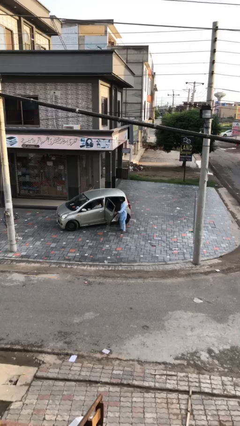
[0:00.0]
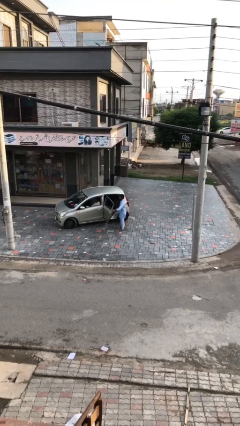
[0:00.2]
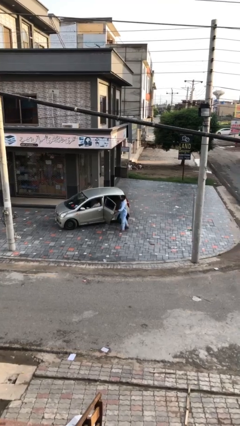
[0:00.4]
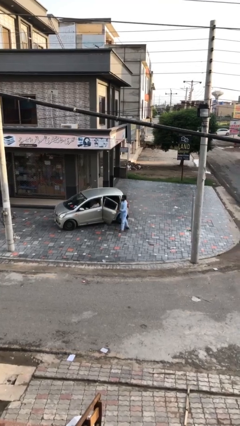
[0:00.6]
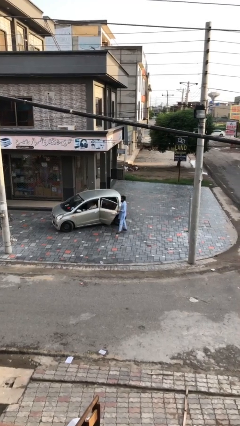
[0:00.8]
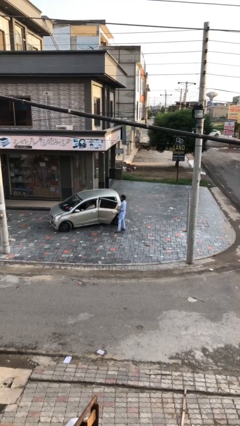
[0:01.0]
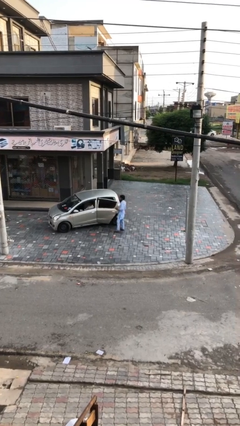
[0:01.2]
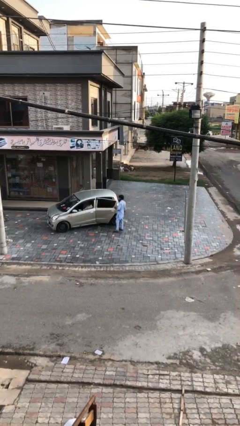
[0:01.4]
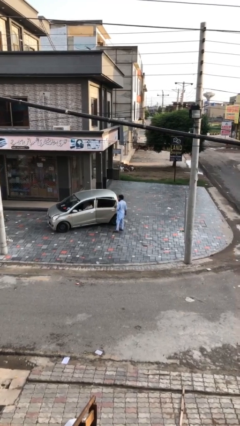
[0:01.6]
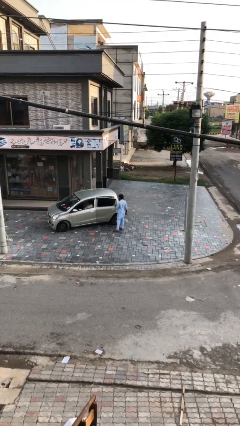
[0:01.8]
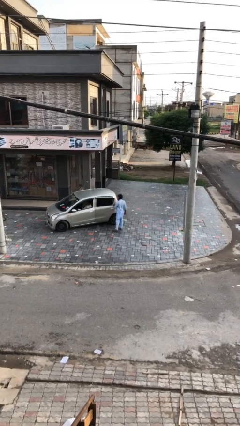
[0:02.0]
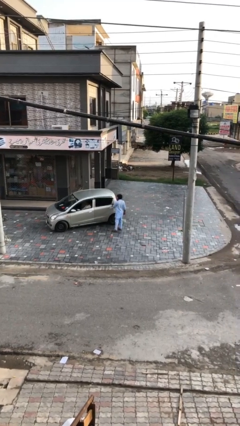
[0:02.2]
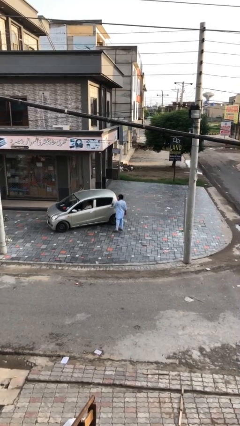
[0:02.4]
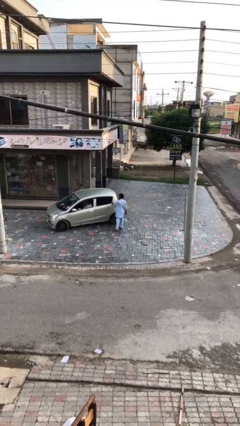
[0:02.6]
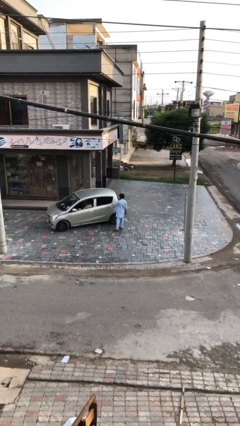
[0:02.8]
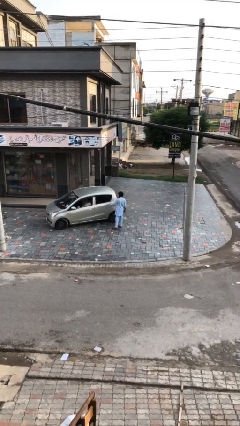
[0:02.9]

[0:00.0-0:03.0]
person closes car door

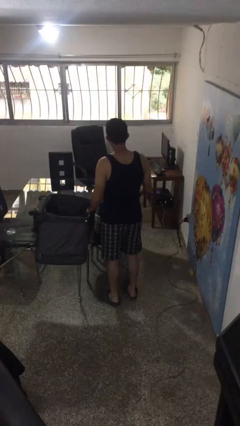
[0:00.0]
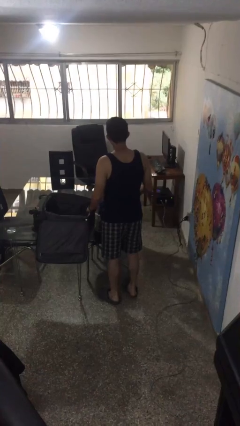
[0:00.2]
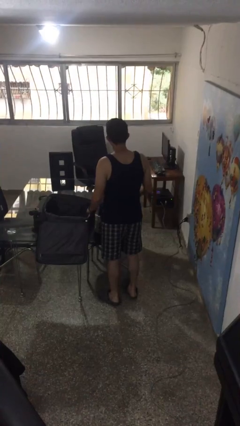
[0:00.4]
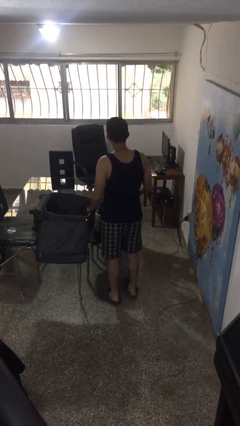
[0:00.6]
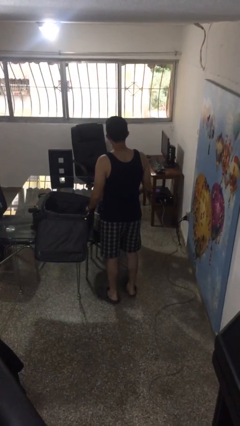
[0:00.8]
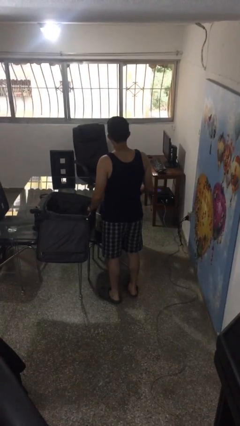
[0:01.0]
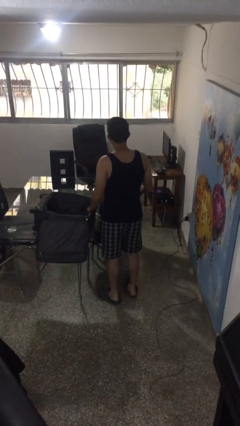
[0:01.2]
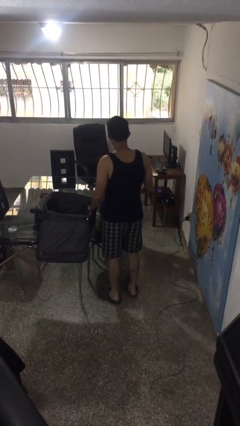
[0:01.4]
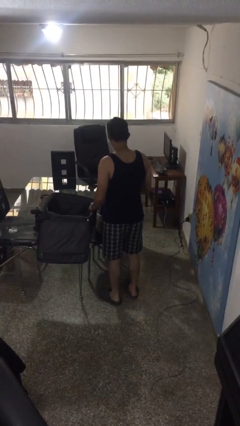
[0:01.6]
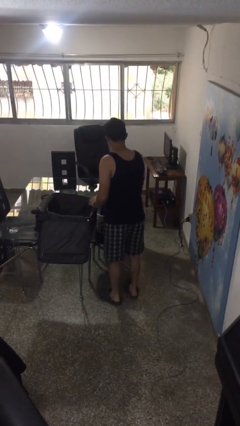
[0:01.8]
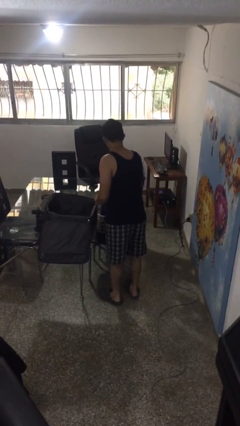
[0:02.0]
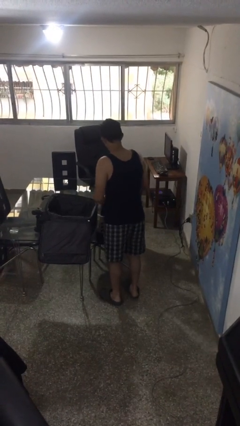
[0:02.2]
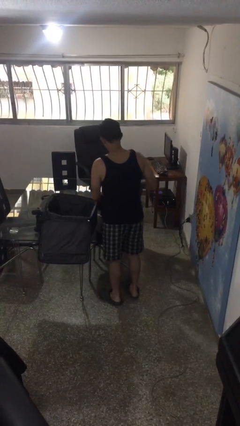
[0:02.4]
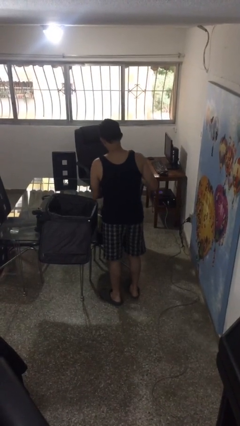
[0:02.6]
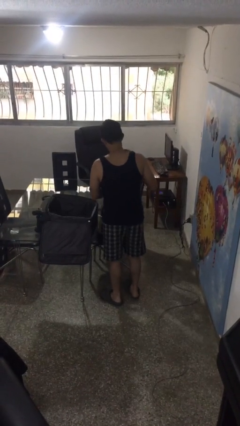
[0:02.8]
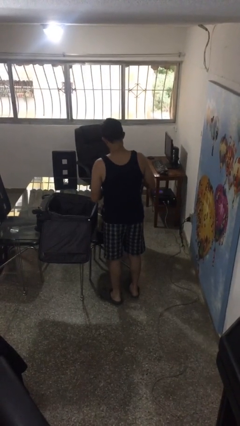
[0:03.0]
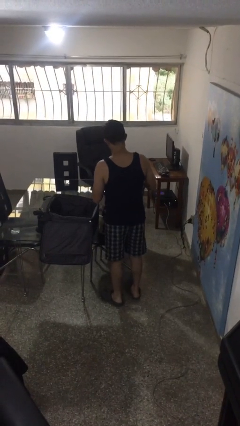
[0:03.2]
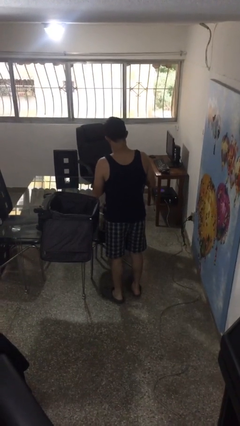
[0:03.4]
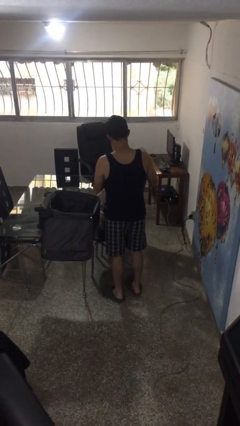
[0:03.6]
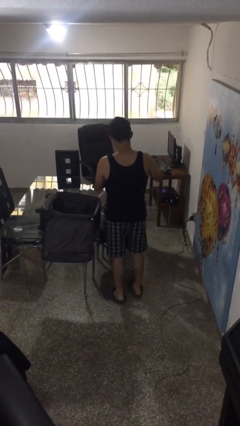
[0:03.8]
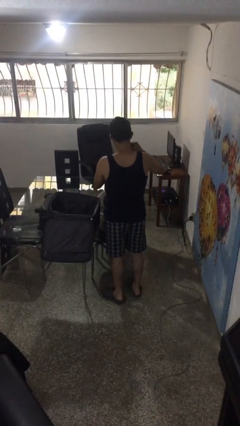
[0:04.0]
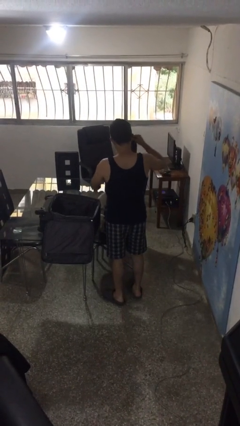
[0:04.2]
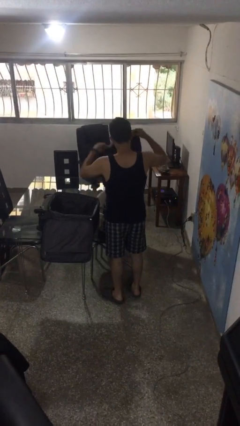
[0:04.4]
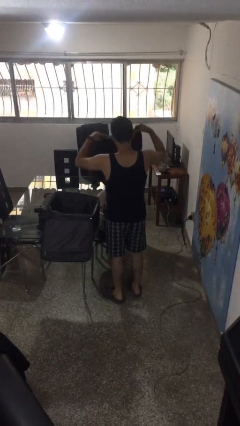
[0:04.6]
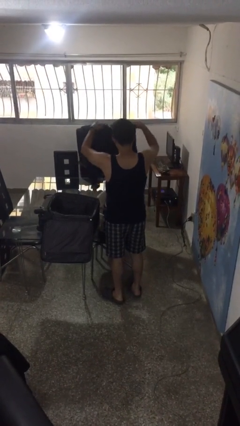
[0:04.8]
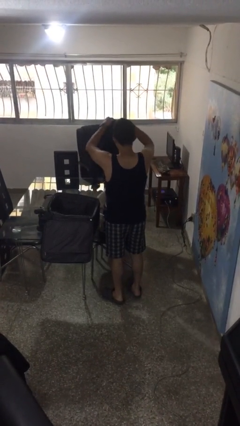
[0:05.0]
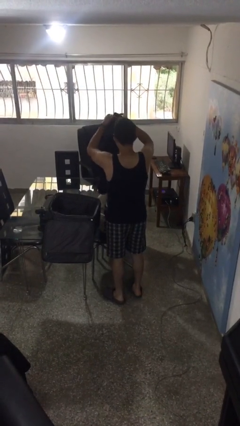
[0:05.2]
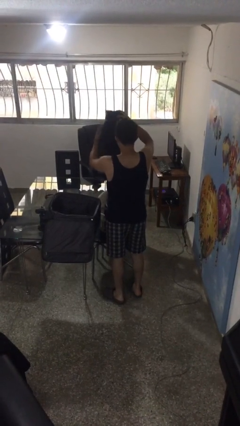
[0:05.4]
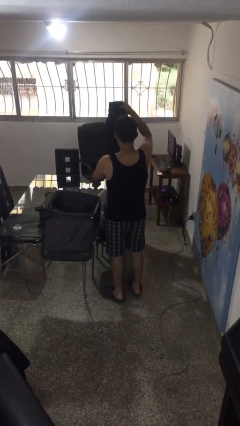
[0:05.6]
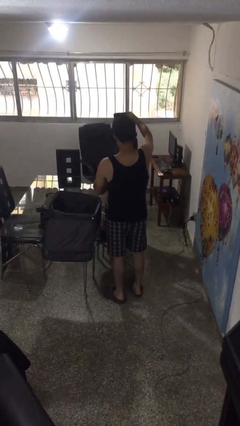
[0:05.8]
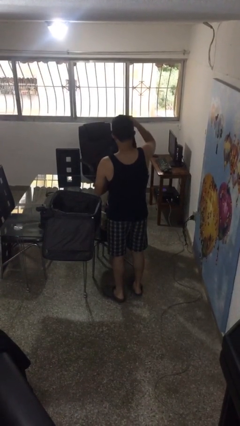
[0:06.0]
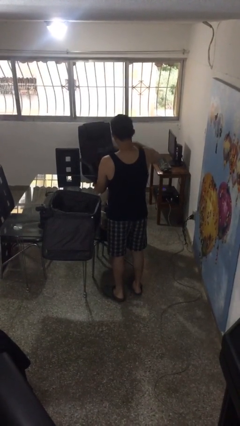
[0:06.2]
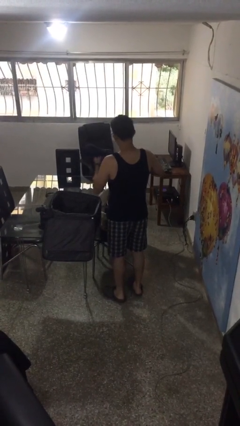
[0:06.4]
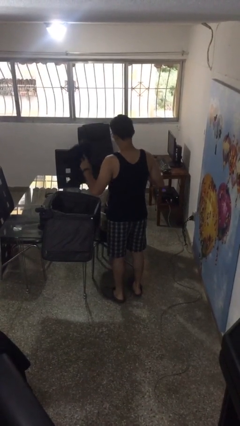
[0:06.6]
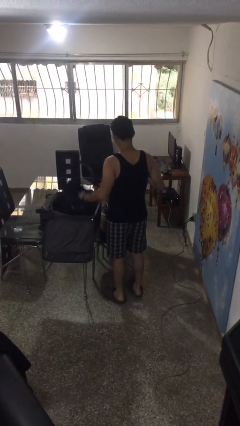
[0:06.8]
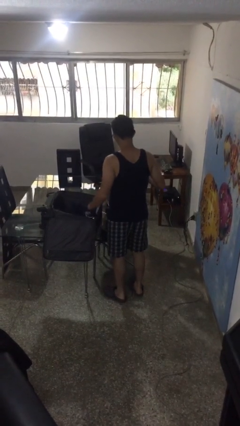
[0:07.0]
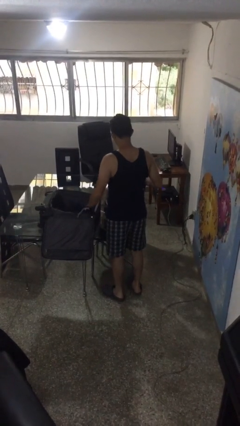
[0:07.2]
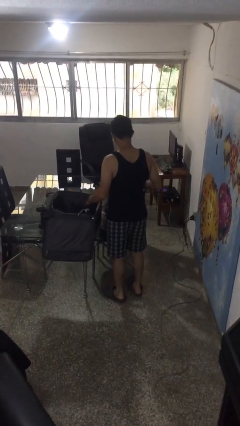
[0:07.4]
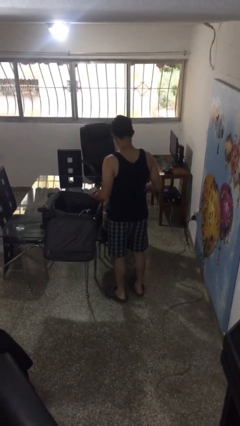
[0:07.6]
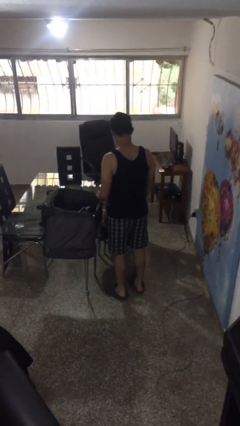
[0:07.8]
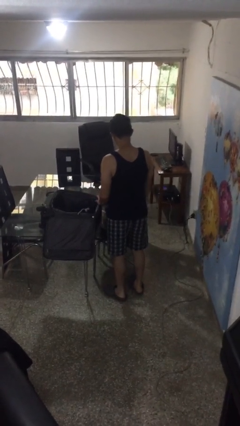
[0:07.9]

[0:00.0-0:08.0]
person loads clothes into suitcase

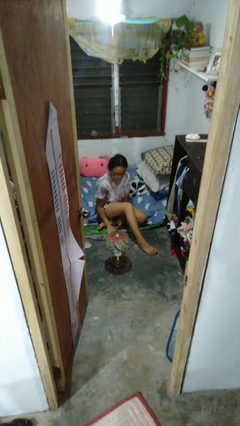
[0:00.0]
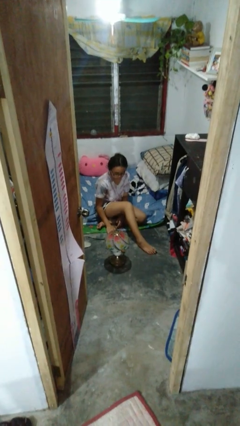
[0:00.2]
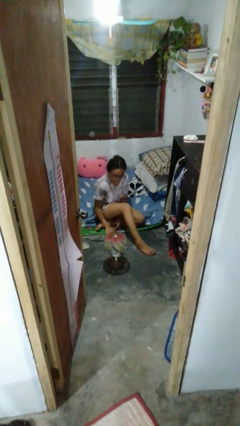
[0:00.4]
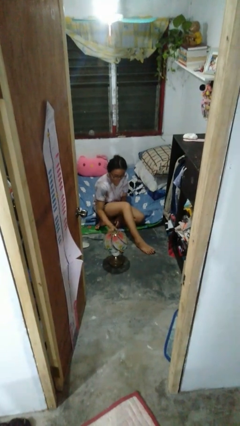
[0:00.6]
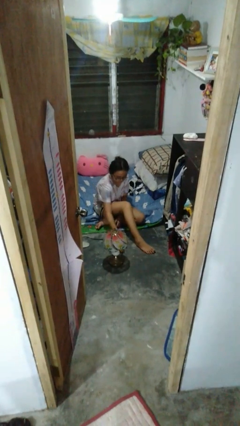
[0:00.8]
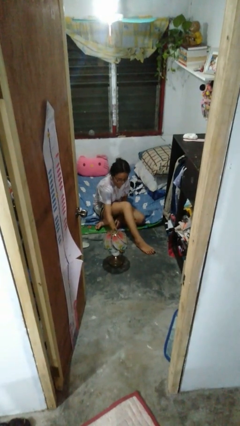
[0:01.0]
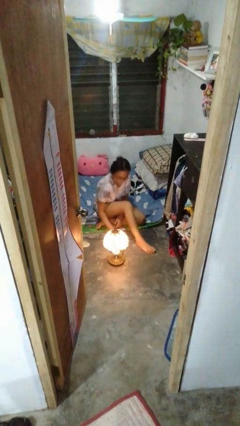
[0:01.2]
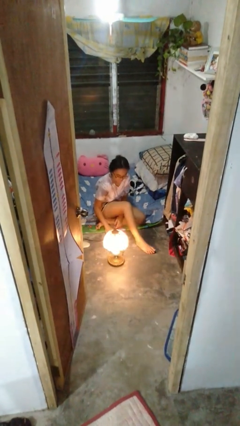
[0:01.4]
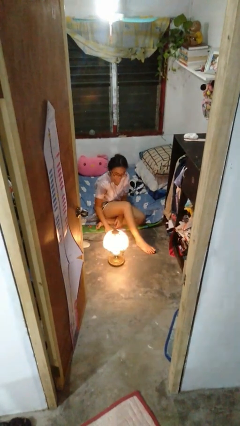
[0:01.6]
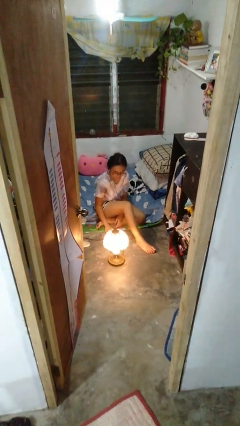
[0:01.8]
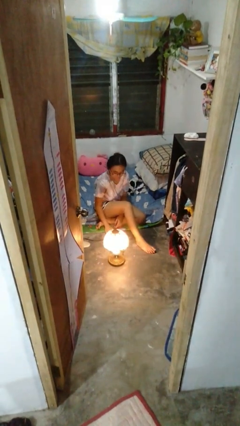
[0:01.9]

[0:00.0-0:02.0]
person turns on lamp

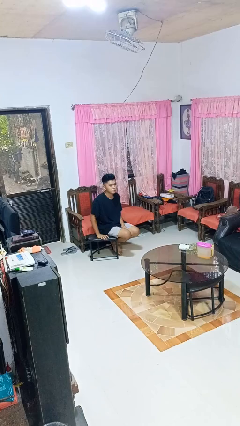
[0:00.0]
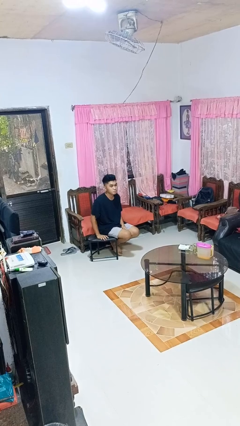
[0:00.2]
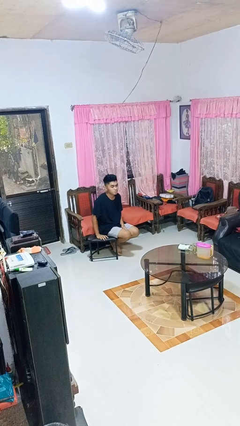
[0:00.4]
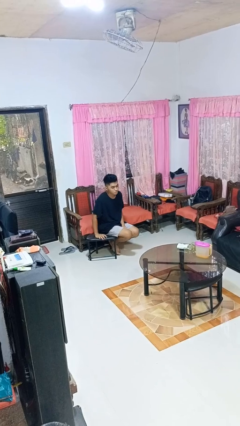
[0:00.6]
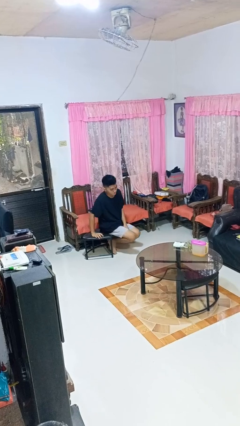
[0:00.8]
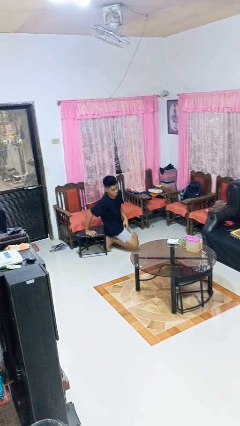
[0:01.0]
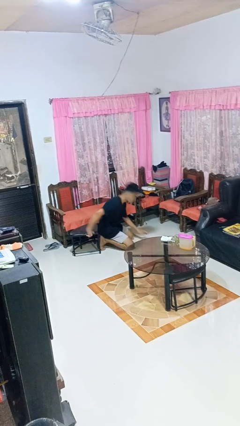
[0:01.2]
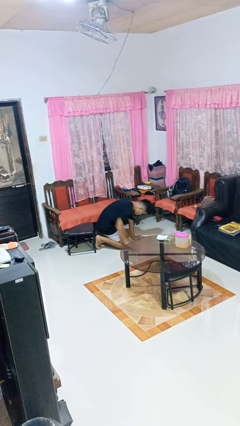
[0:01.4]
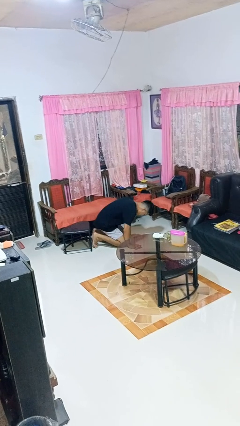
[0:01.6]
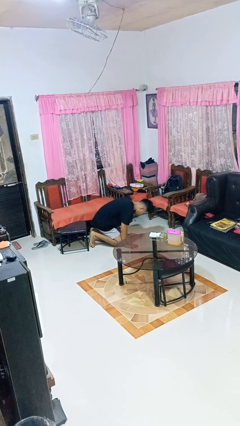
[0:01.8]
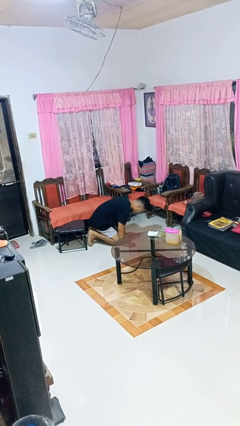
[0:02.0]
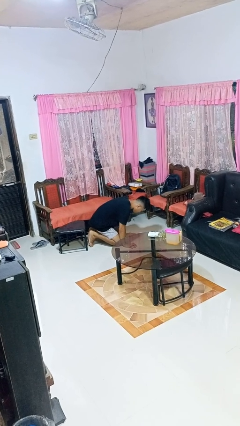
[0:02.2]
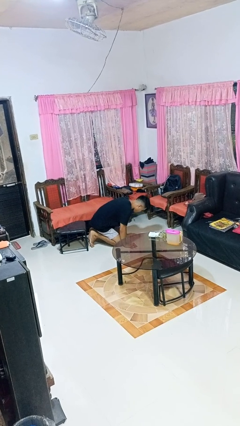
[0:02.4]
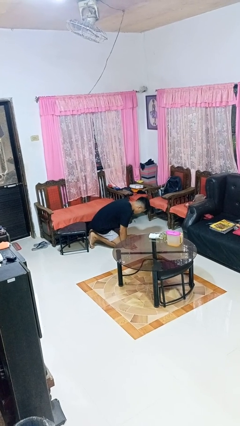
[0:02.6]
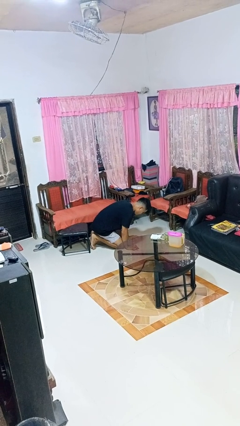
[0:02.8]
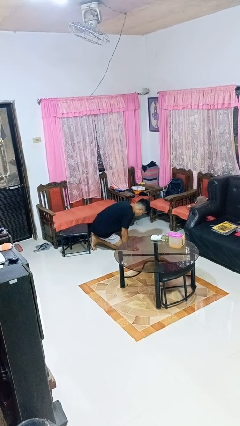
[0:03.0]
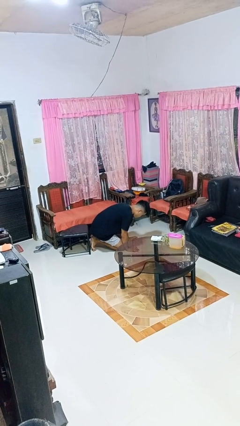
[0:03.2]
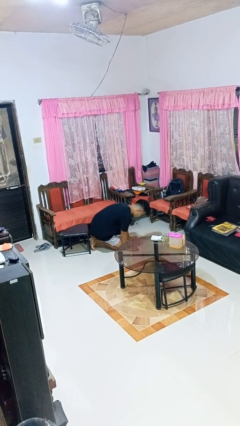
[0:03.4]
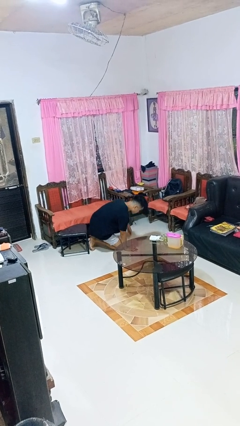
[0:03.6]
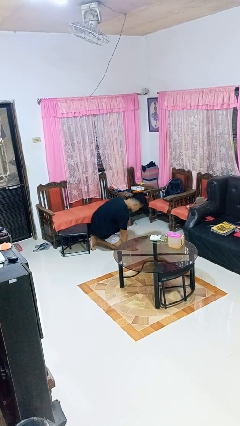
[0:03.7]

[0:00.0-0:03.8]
person falls from chair

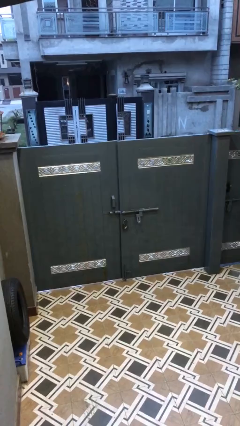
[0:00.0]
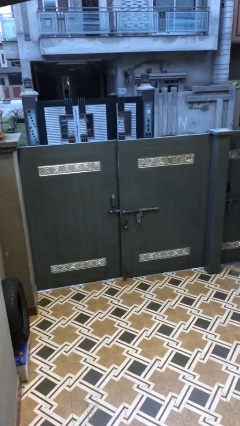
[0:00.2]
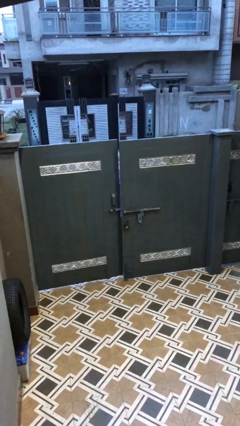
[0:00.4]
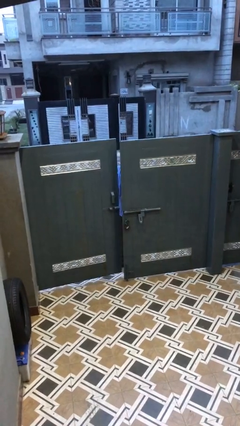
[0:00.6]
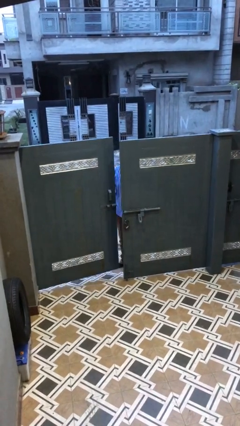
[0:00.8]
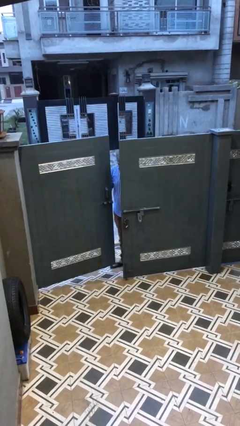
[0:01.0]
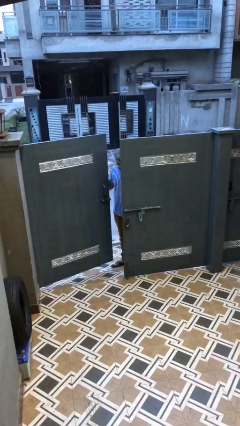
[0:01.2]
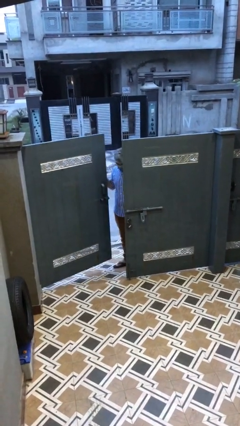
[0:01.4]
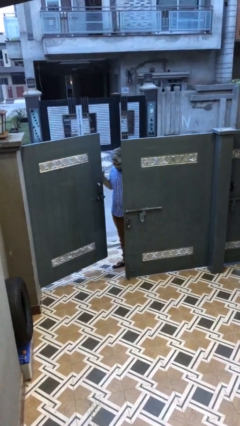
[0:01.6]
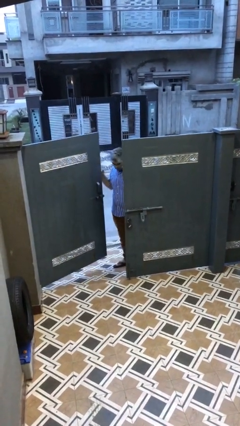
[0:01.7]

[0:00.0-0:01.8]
person opens facility door
